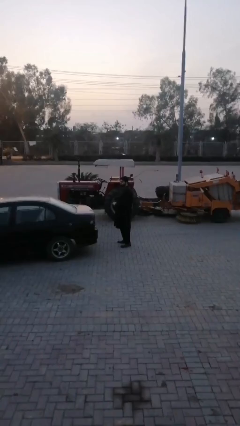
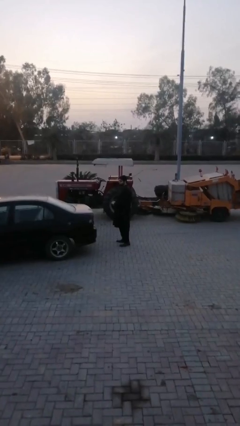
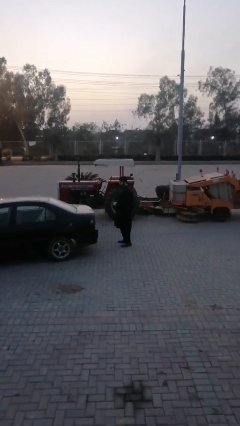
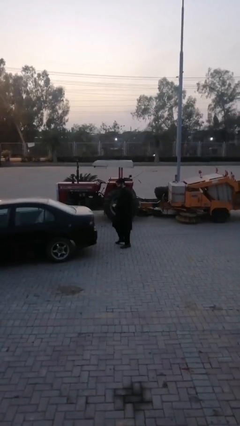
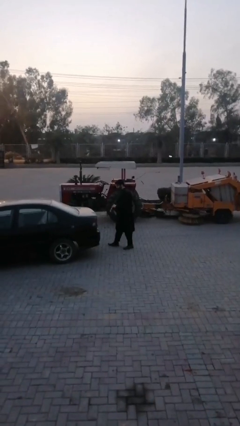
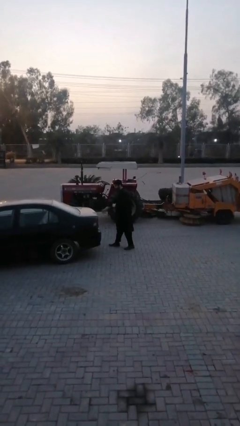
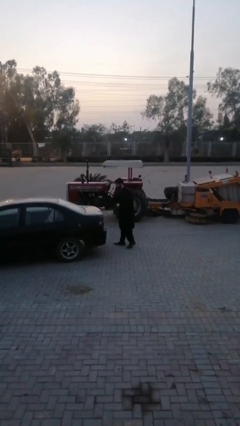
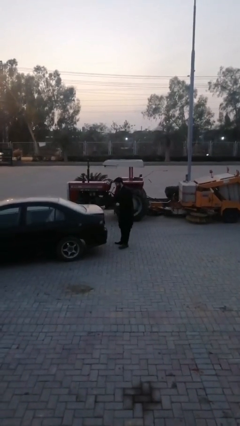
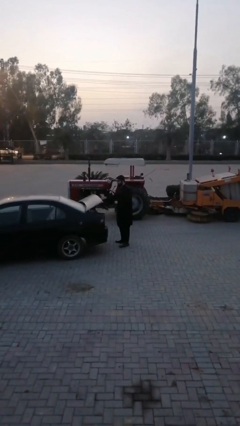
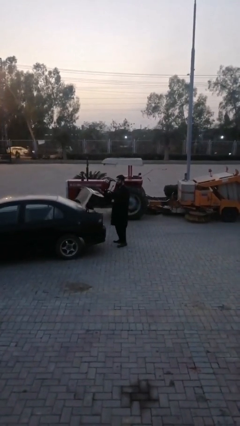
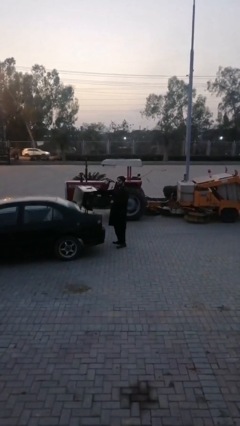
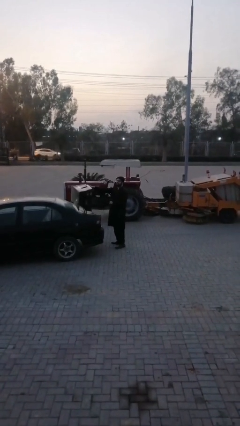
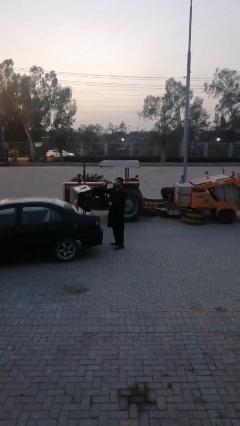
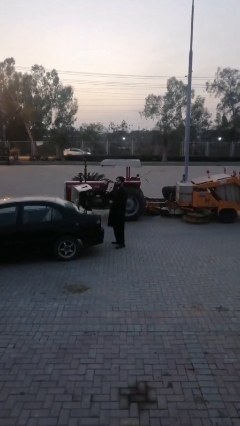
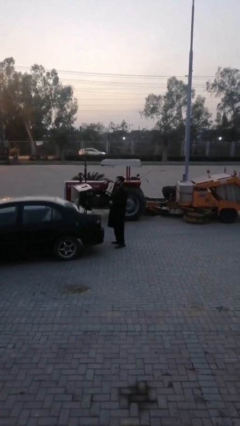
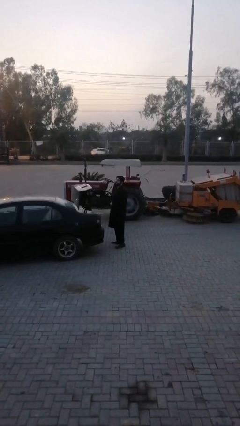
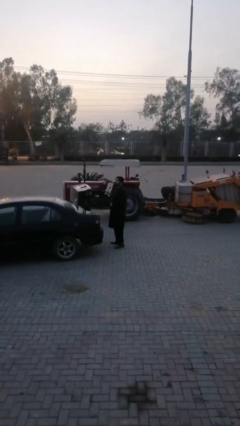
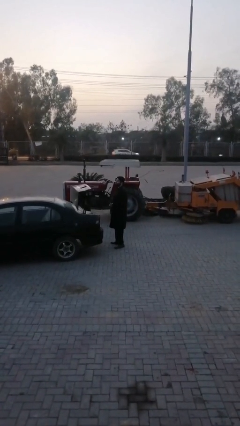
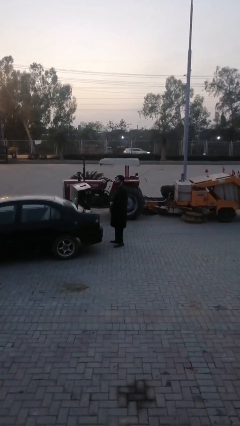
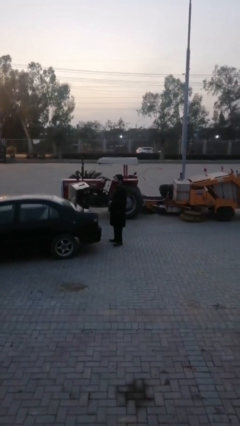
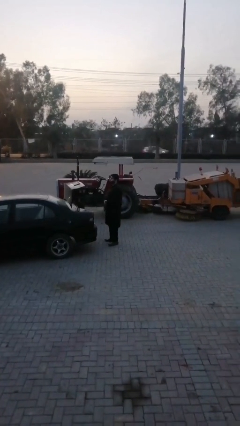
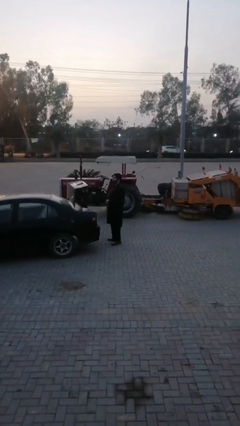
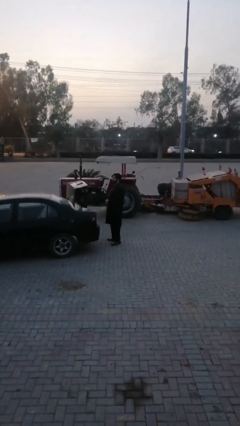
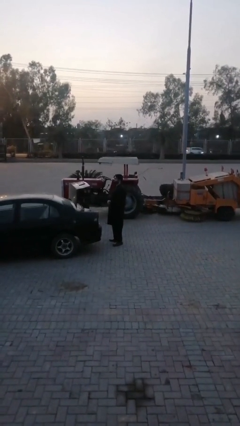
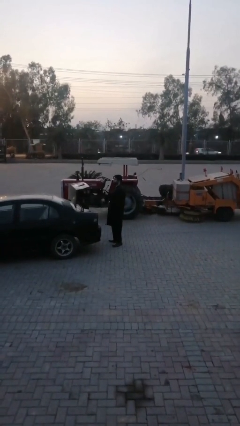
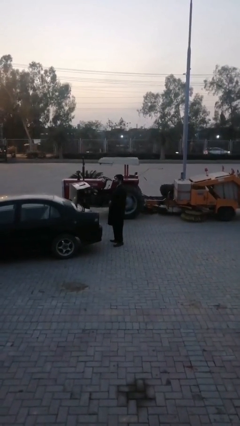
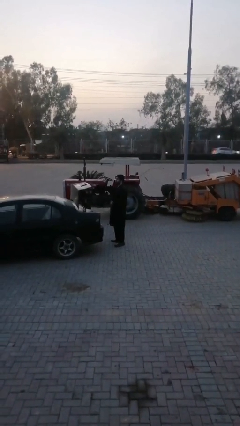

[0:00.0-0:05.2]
person opens car trunk

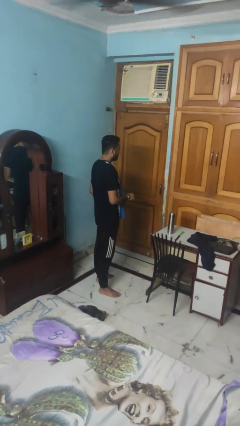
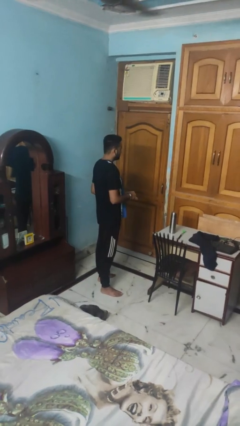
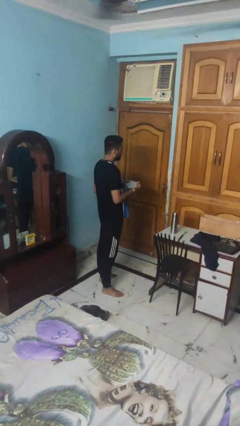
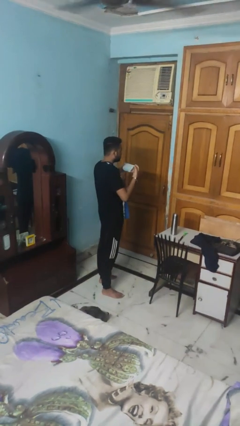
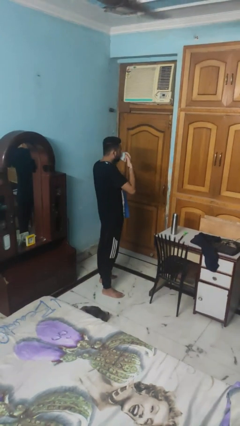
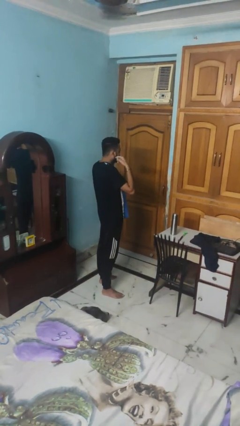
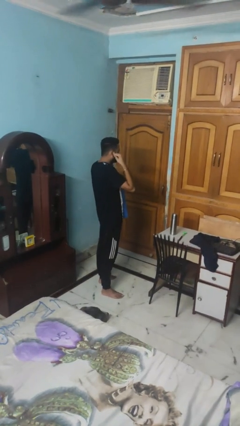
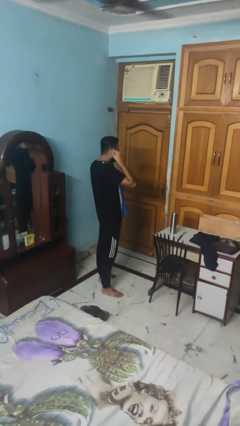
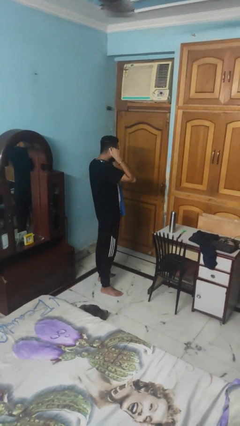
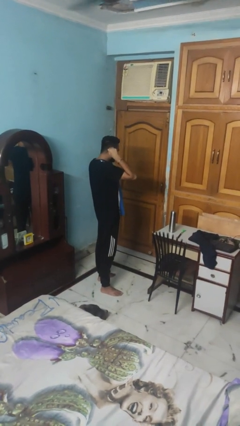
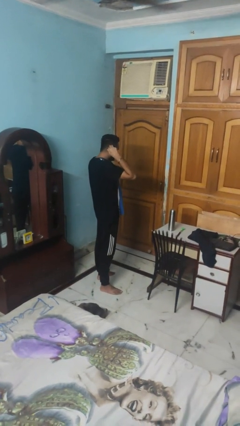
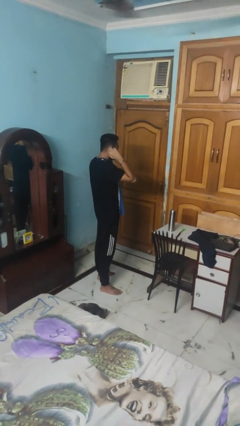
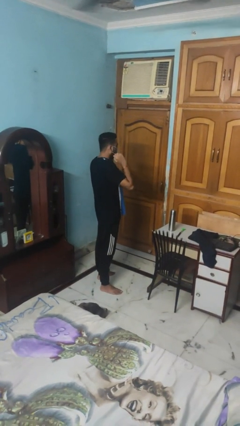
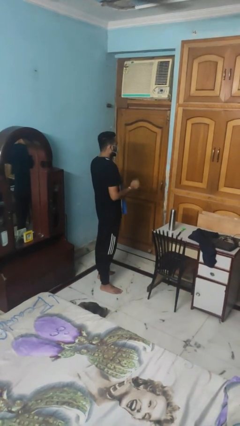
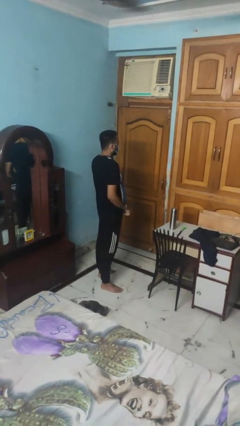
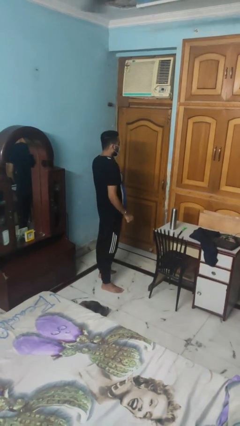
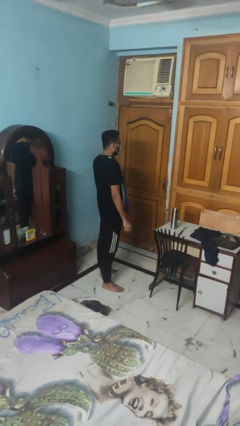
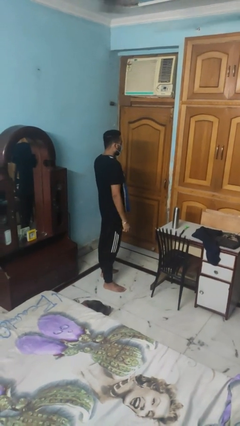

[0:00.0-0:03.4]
person puts on facemask

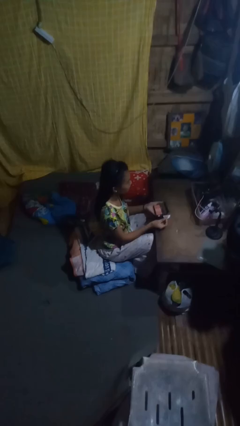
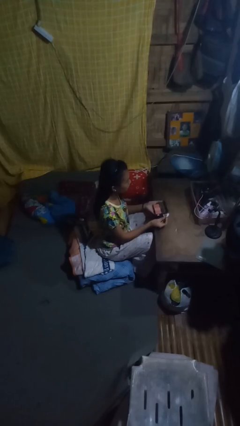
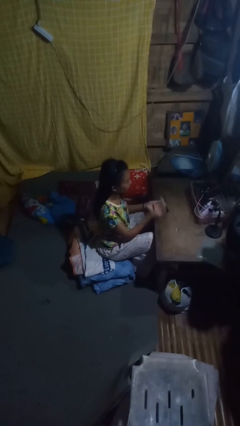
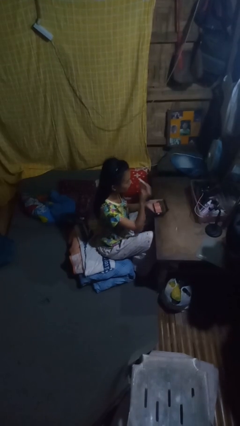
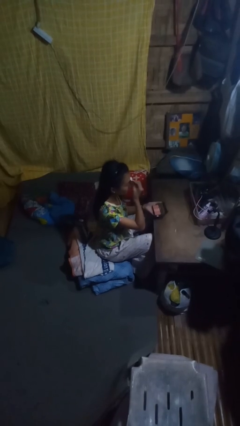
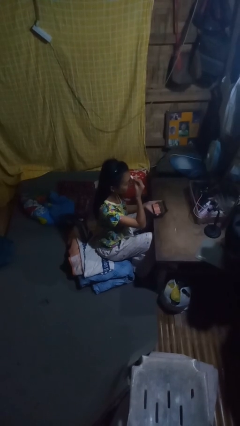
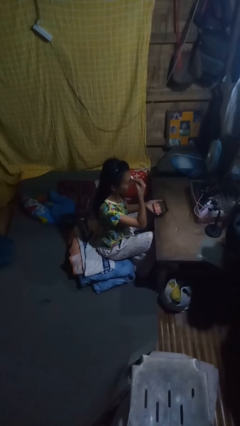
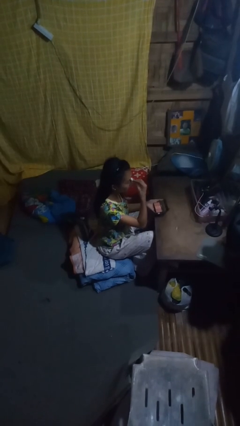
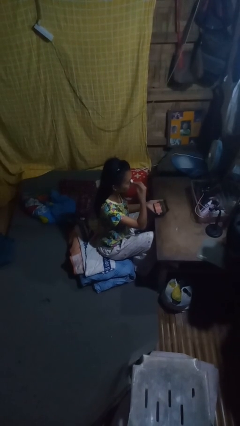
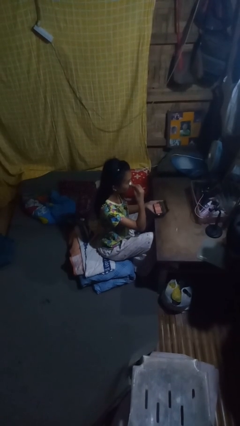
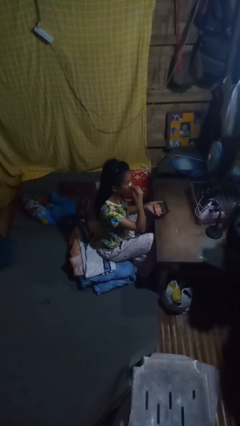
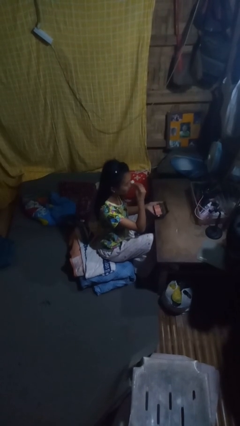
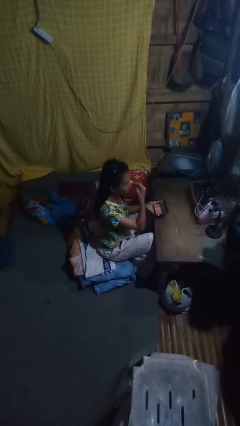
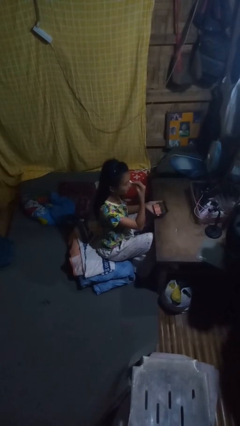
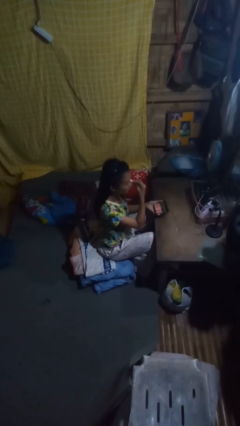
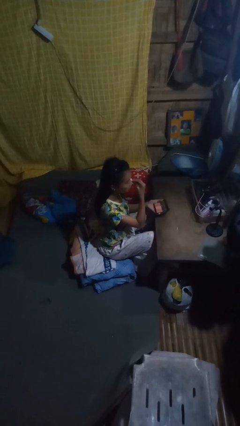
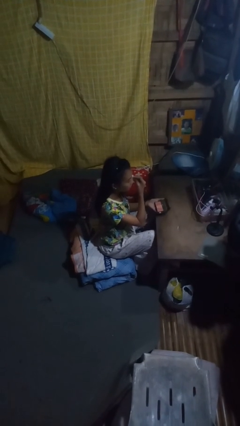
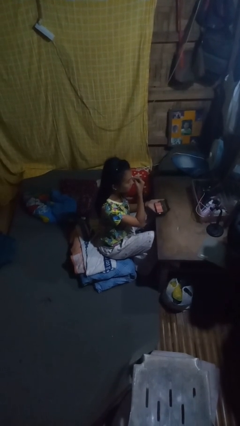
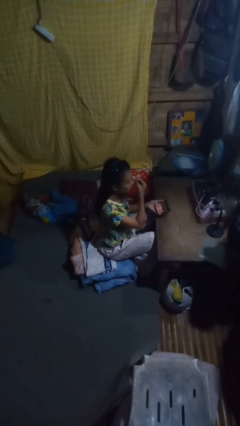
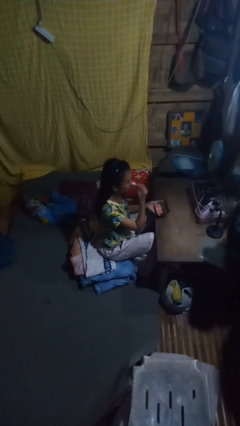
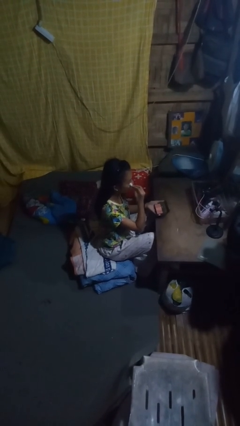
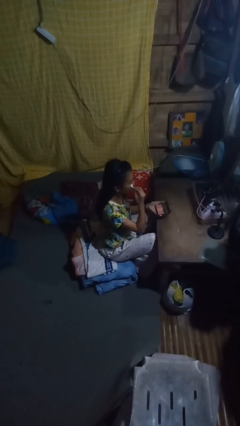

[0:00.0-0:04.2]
person applies foundation makeup

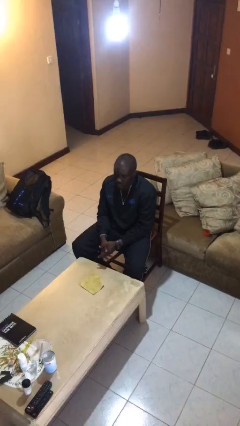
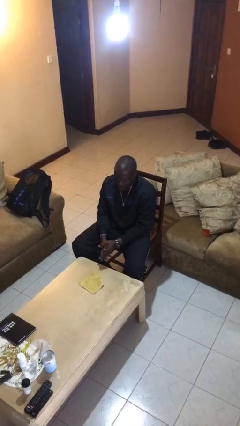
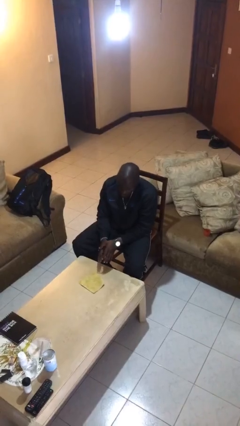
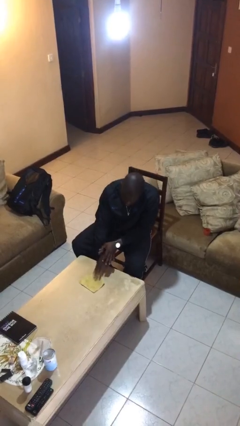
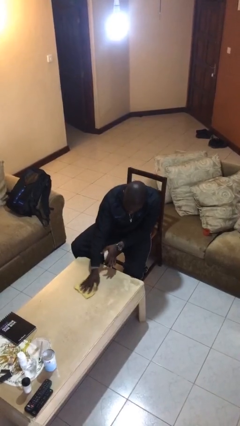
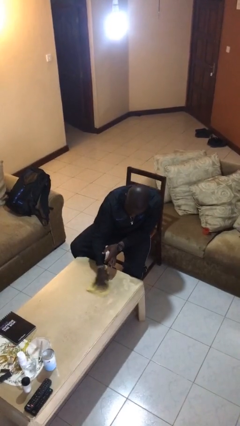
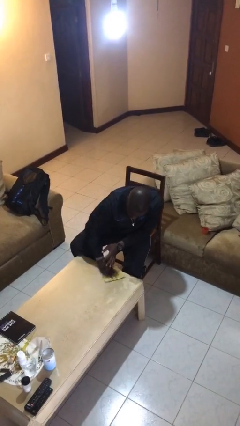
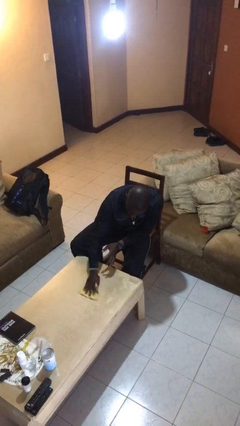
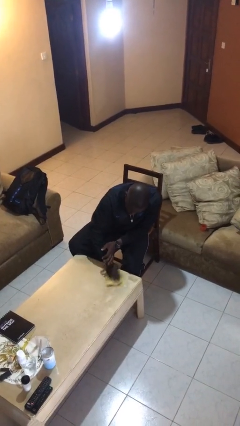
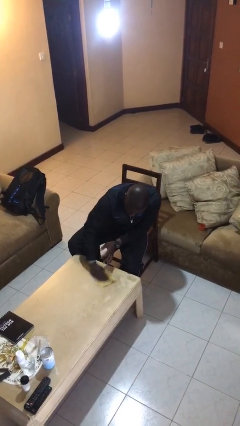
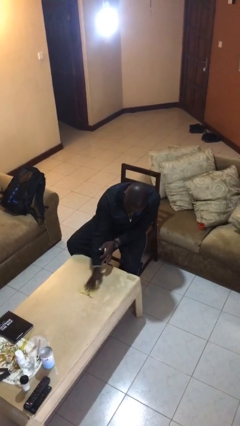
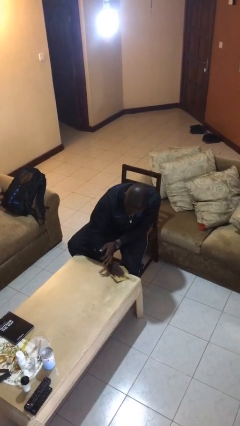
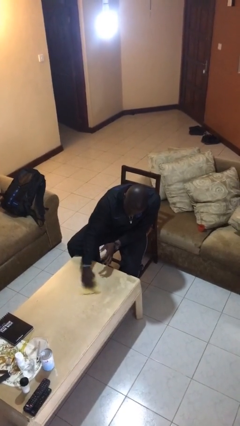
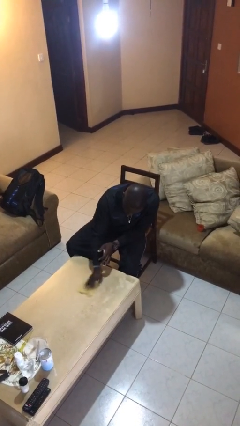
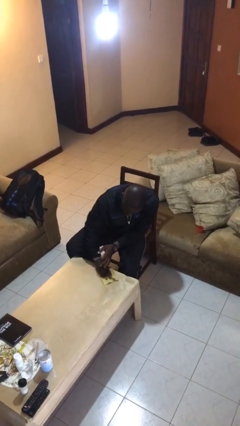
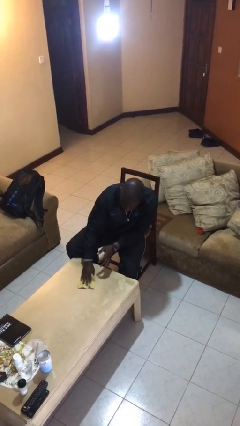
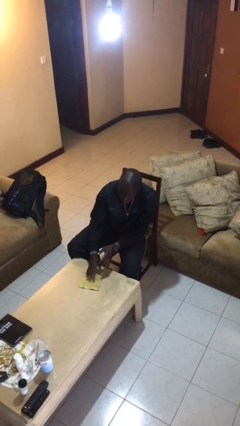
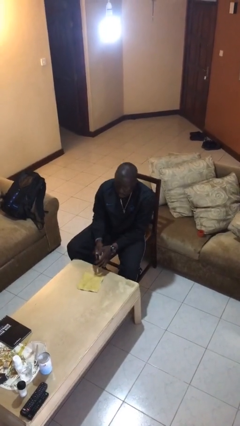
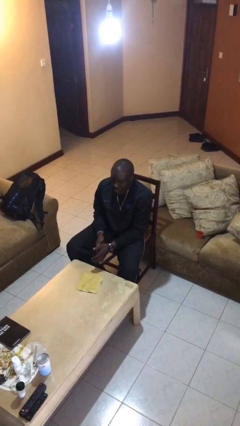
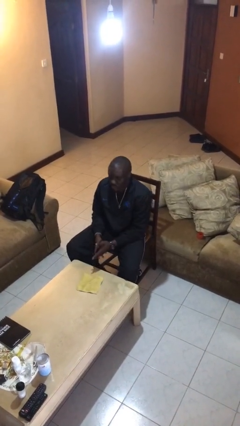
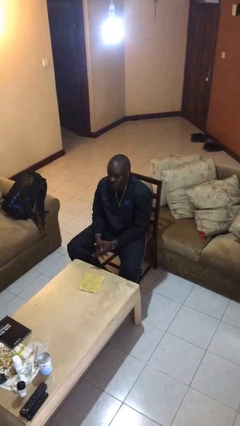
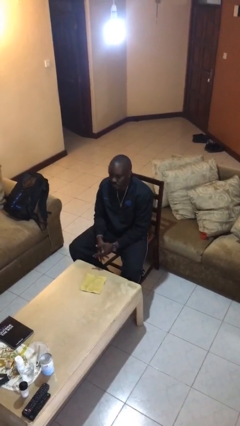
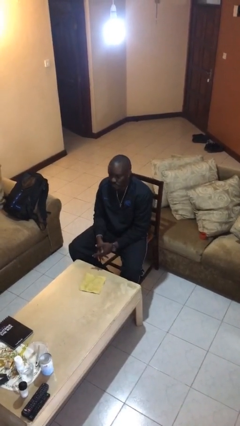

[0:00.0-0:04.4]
person cleans table with rag

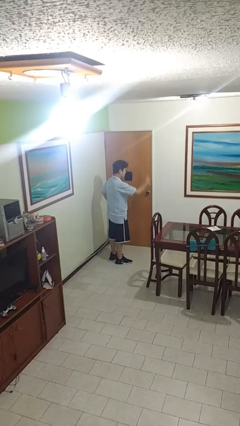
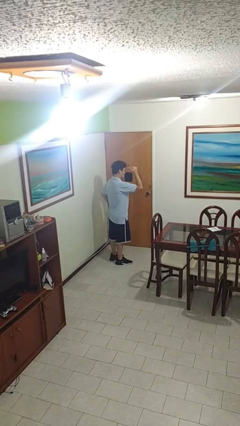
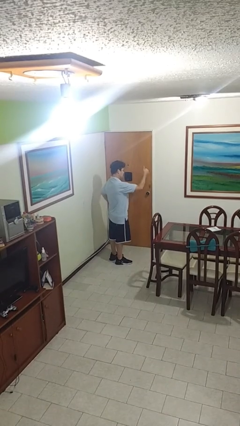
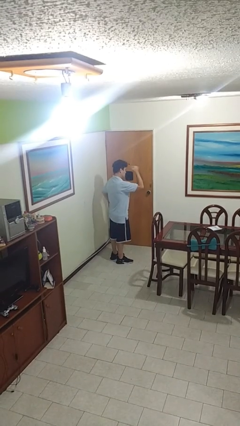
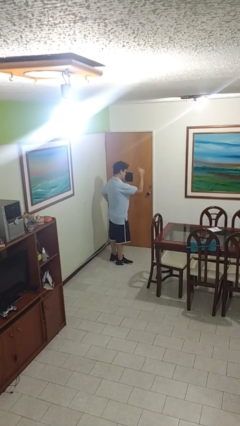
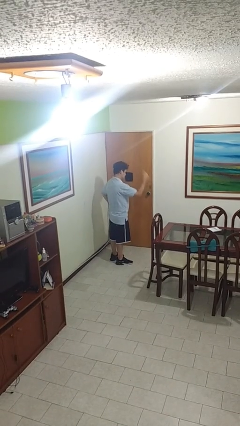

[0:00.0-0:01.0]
person gestures behind me
